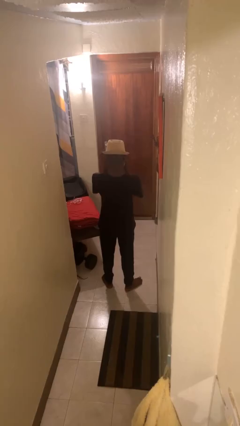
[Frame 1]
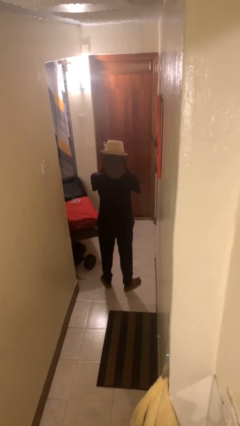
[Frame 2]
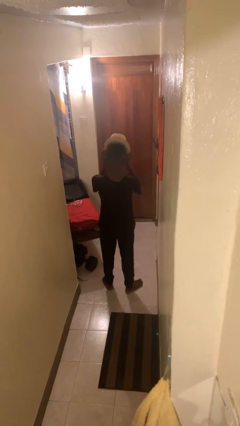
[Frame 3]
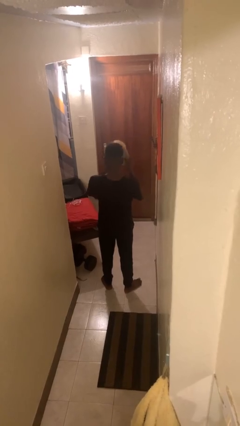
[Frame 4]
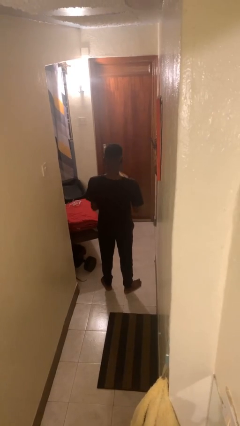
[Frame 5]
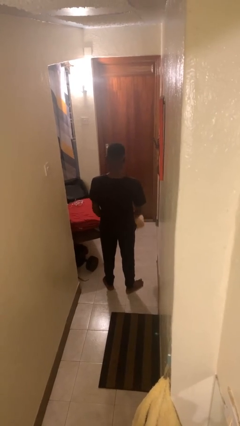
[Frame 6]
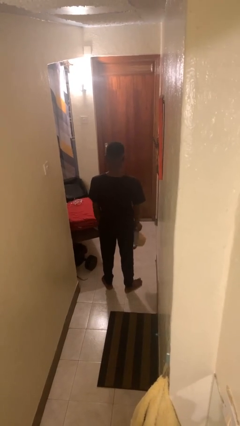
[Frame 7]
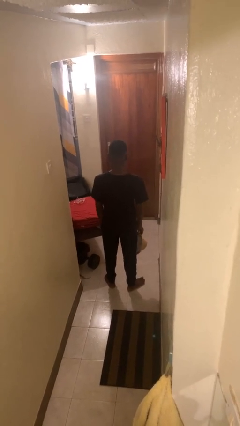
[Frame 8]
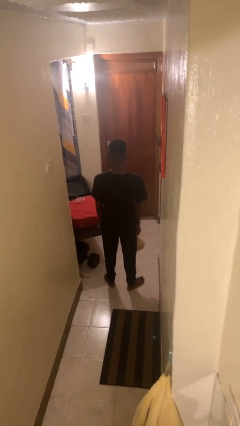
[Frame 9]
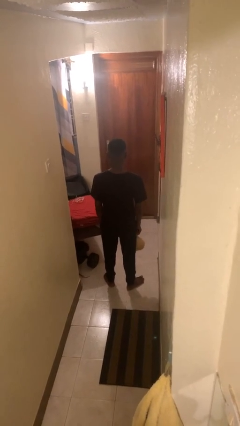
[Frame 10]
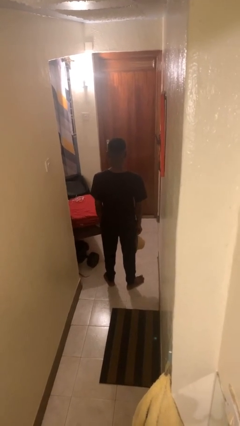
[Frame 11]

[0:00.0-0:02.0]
person takes off hat

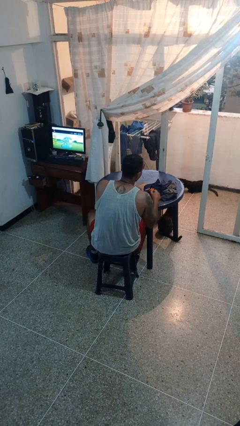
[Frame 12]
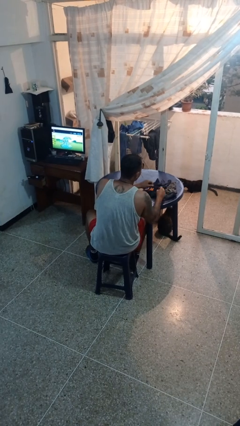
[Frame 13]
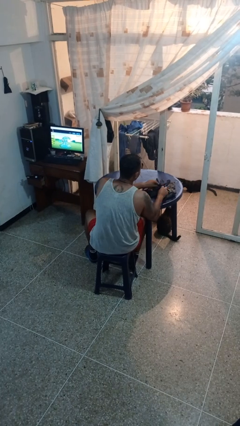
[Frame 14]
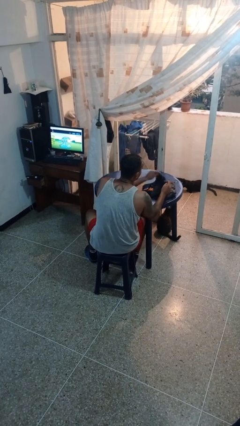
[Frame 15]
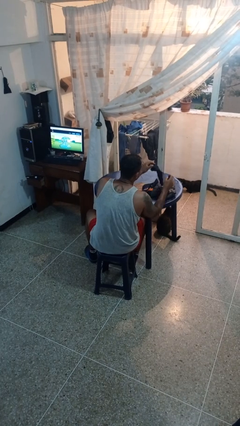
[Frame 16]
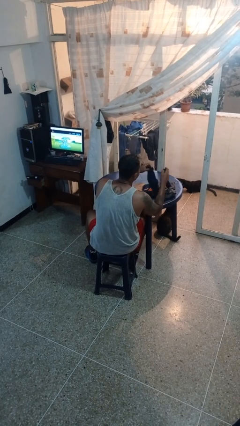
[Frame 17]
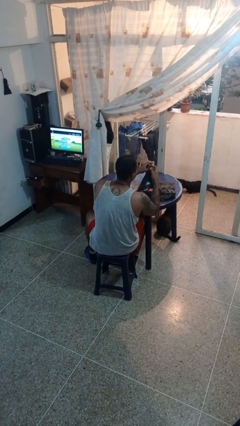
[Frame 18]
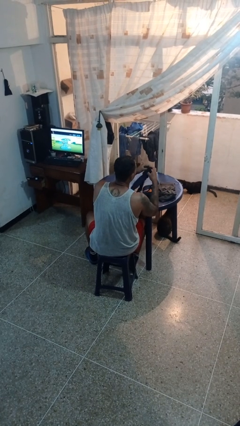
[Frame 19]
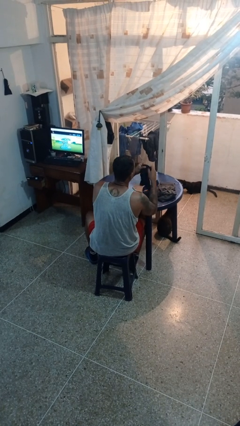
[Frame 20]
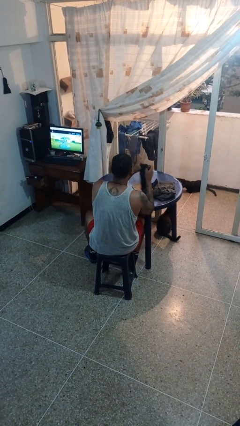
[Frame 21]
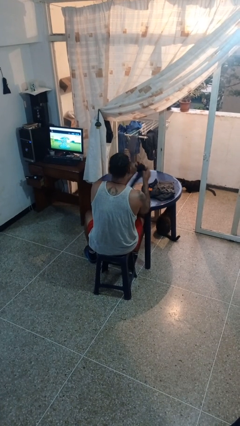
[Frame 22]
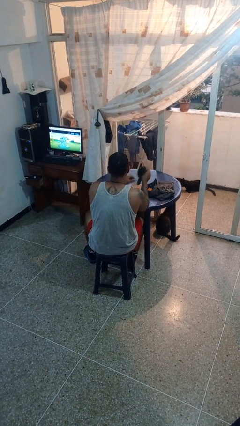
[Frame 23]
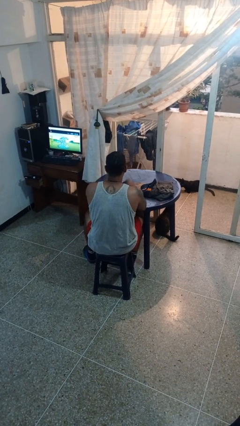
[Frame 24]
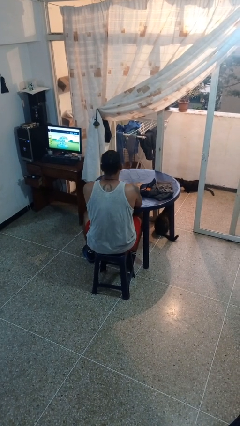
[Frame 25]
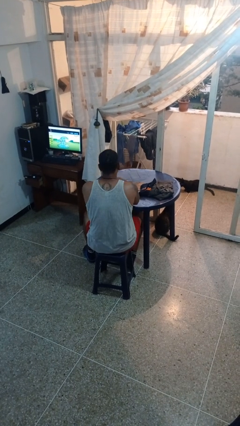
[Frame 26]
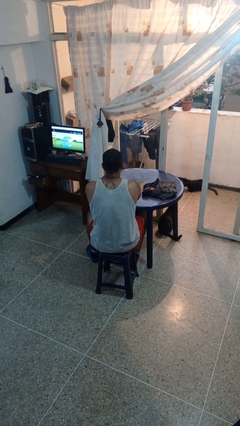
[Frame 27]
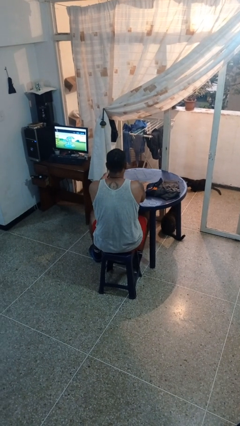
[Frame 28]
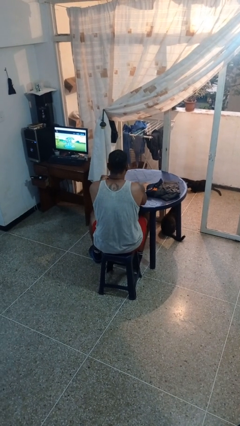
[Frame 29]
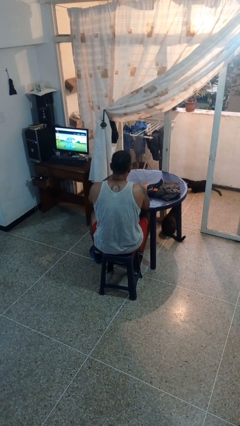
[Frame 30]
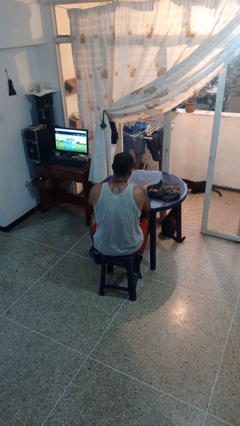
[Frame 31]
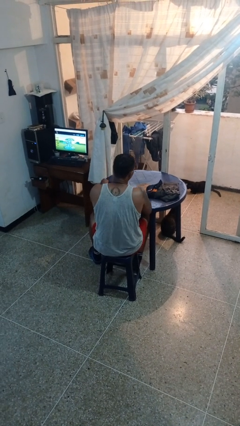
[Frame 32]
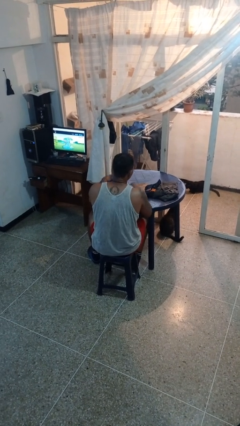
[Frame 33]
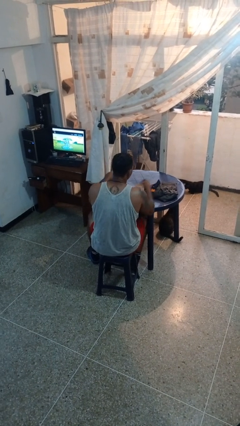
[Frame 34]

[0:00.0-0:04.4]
person folds socks

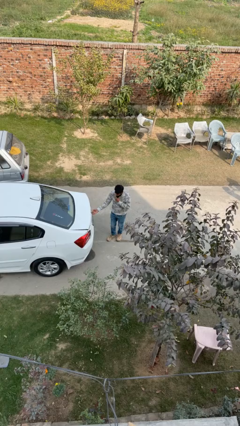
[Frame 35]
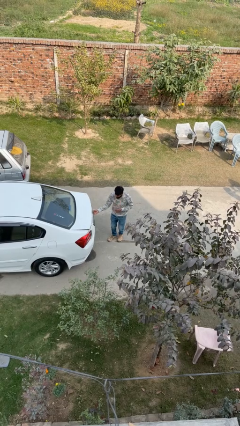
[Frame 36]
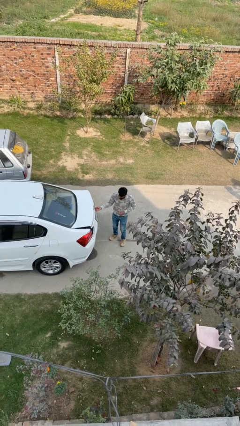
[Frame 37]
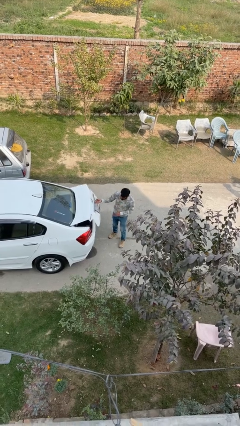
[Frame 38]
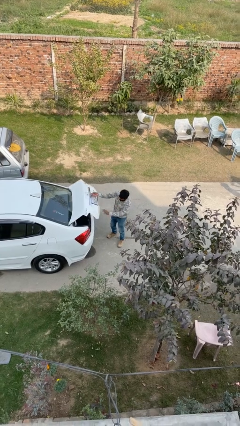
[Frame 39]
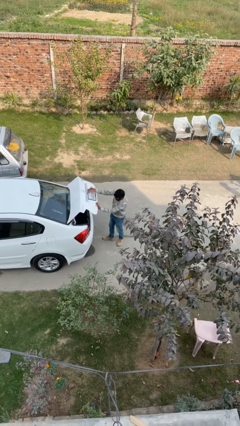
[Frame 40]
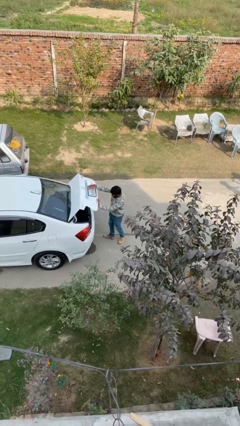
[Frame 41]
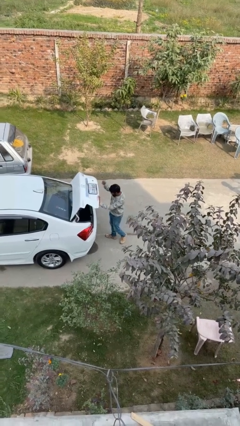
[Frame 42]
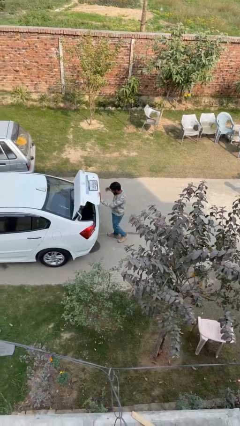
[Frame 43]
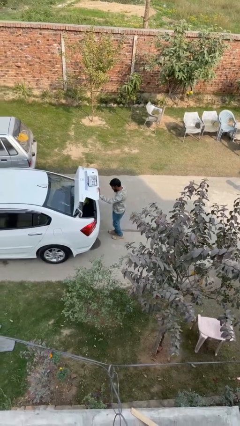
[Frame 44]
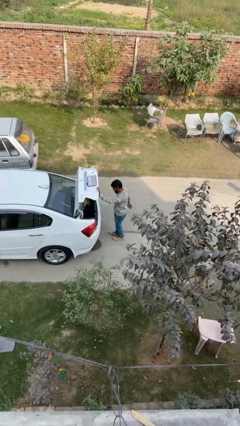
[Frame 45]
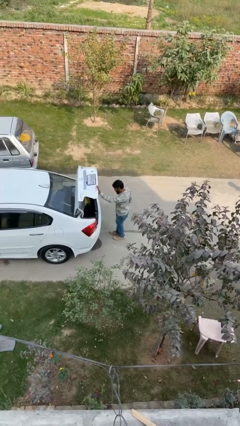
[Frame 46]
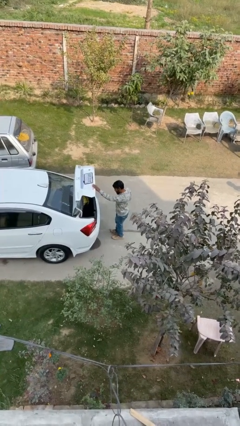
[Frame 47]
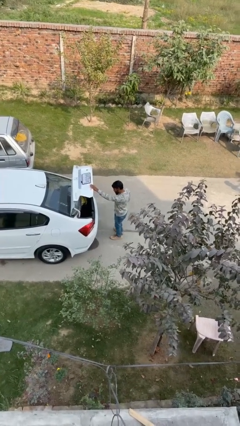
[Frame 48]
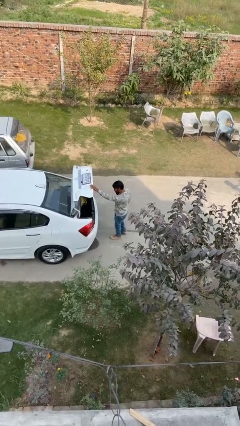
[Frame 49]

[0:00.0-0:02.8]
person opens car trunk

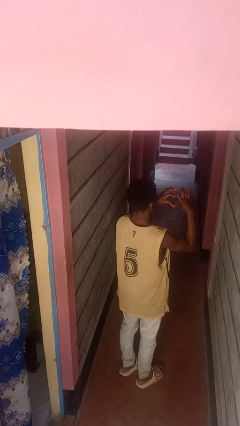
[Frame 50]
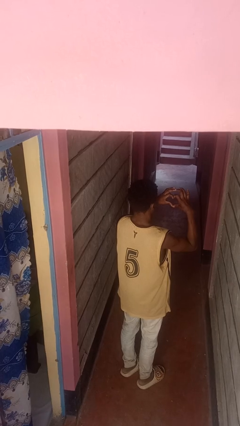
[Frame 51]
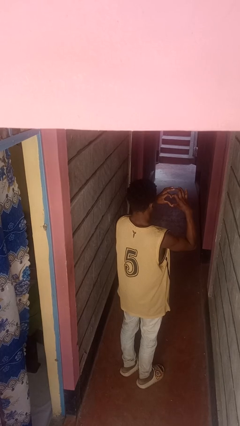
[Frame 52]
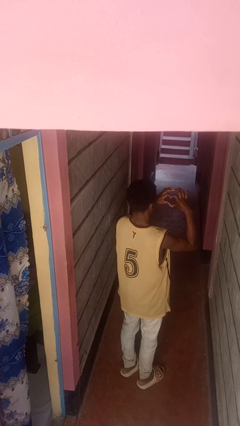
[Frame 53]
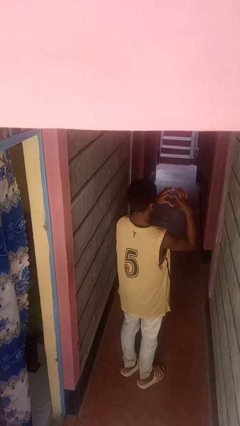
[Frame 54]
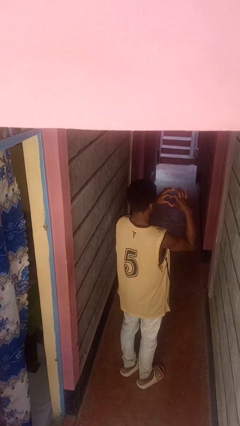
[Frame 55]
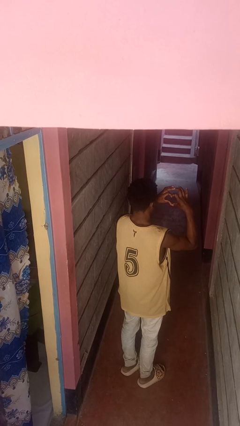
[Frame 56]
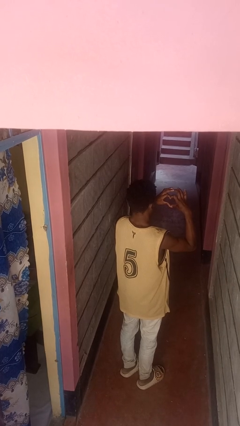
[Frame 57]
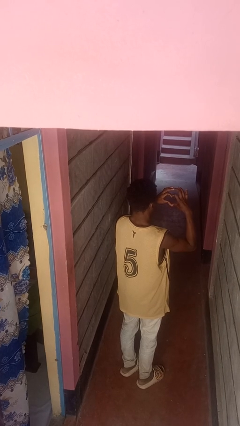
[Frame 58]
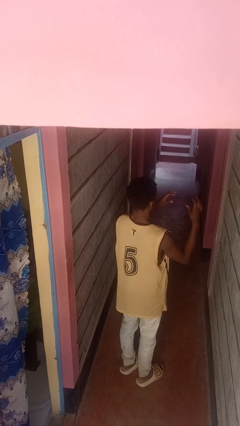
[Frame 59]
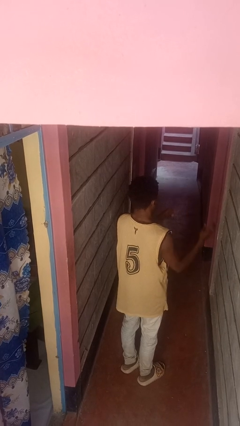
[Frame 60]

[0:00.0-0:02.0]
person gestures heart

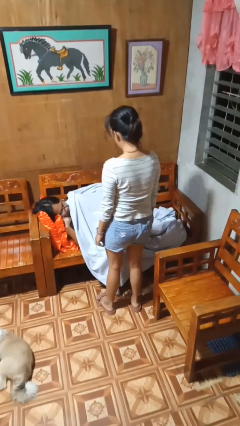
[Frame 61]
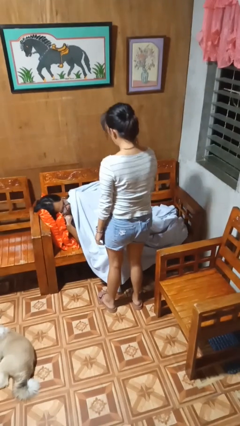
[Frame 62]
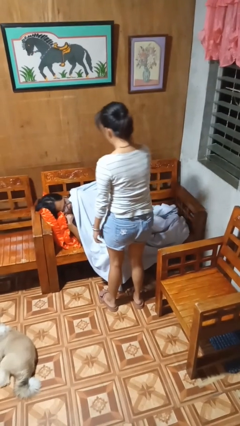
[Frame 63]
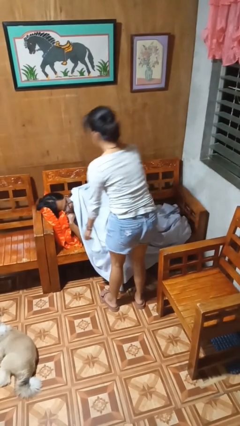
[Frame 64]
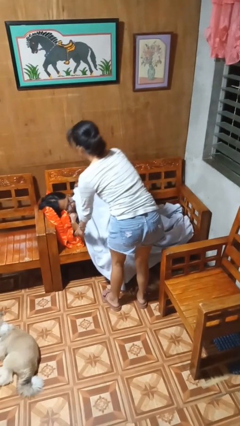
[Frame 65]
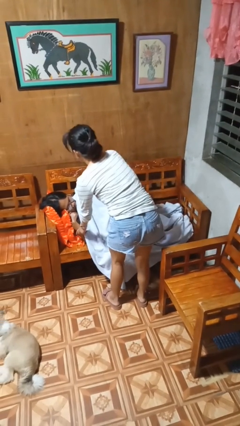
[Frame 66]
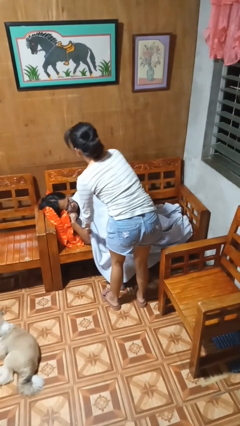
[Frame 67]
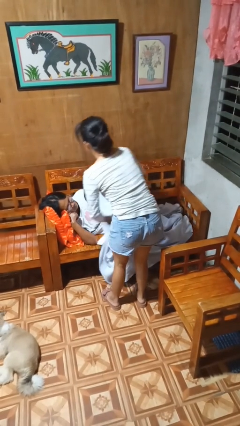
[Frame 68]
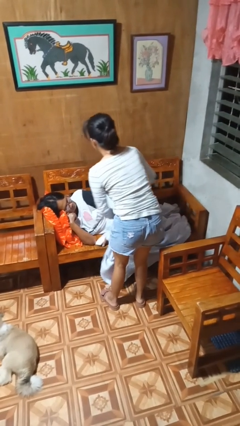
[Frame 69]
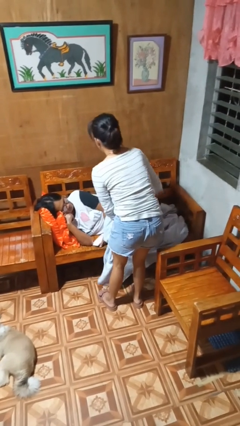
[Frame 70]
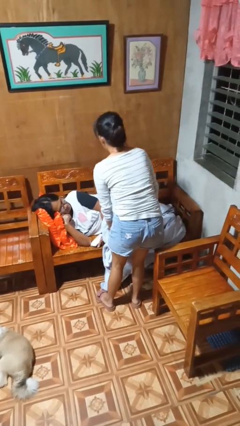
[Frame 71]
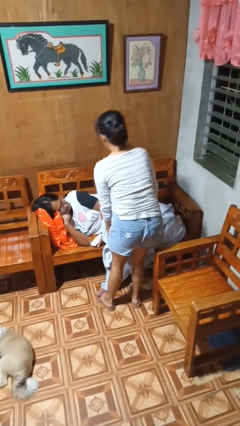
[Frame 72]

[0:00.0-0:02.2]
person uncovers friend with blanket

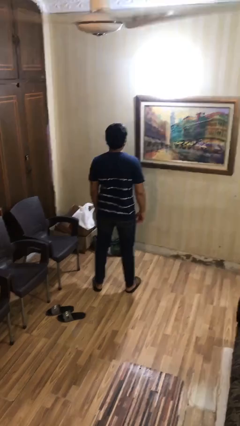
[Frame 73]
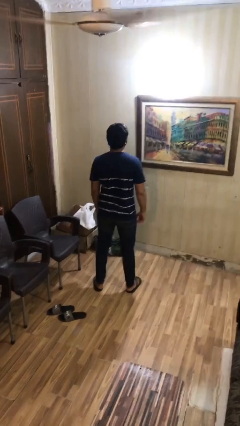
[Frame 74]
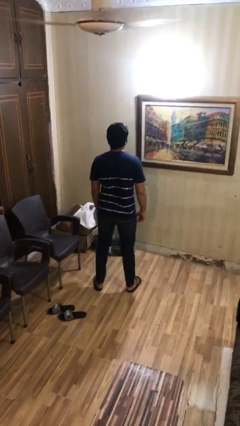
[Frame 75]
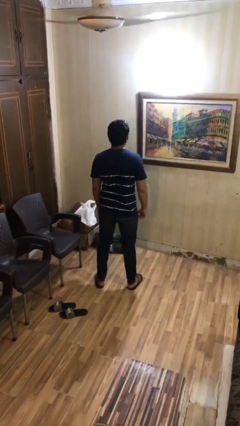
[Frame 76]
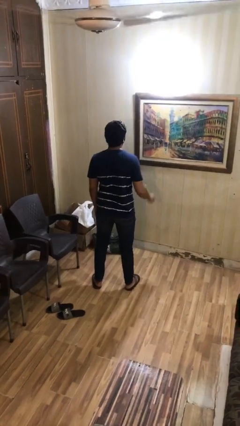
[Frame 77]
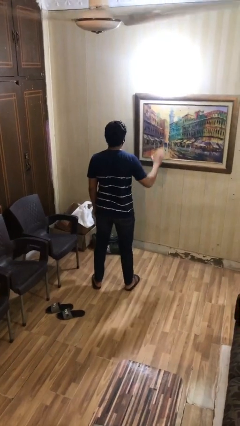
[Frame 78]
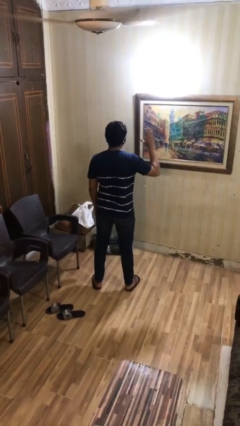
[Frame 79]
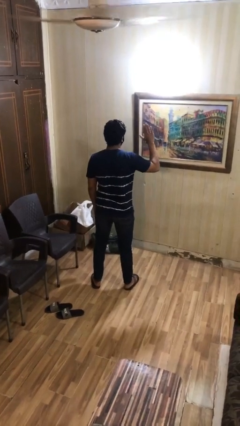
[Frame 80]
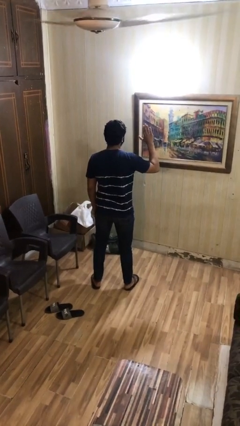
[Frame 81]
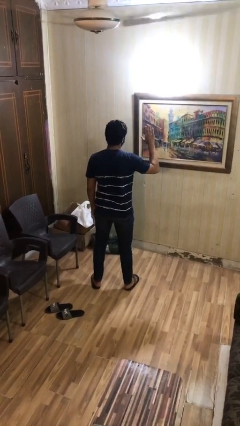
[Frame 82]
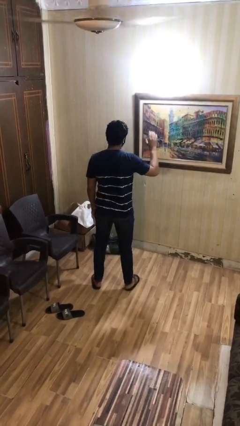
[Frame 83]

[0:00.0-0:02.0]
person gestures stop

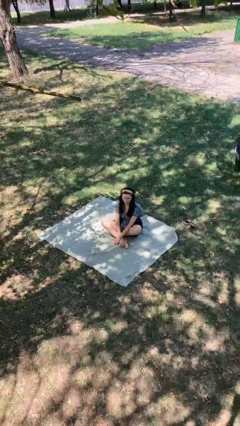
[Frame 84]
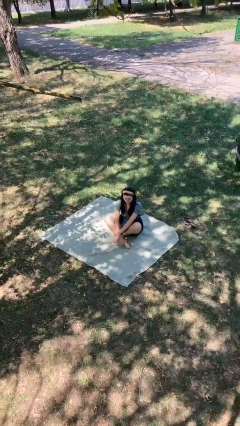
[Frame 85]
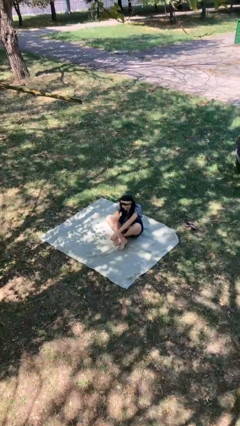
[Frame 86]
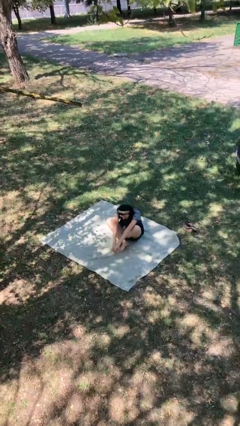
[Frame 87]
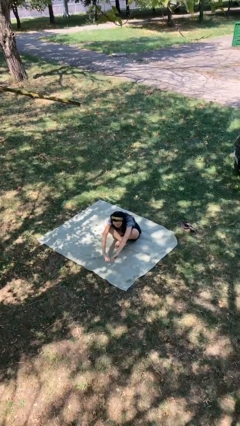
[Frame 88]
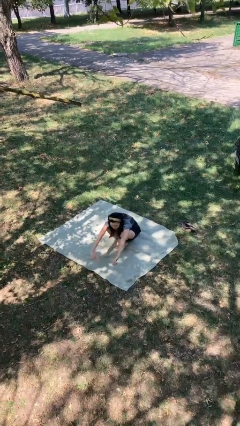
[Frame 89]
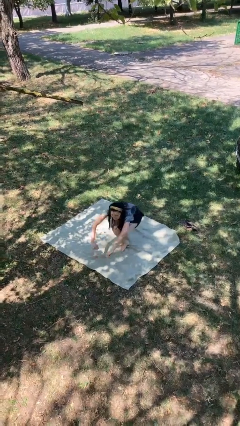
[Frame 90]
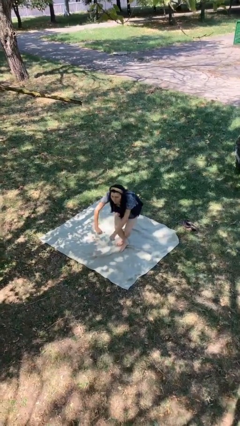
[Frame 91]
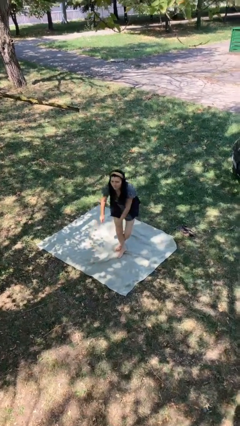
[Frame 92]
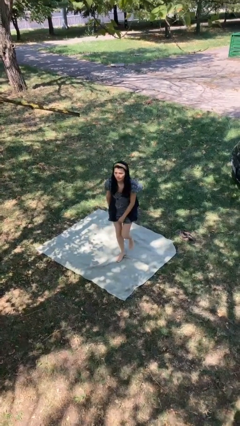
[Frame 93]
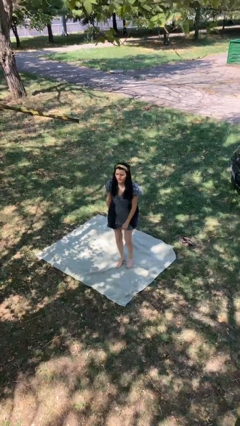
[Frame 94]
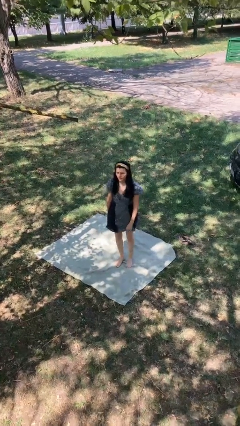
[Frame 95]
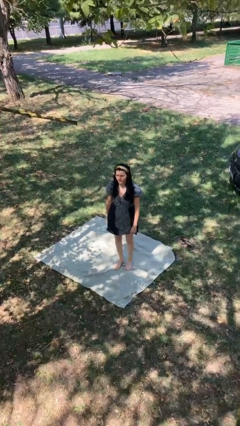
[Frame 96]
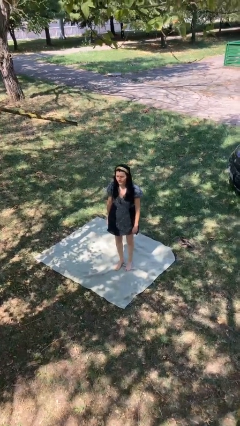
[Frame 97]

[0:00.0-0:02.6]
person stands up from floor
